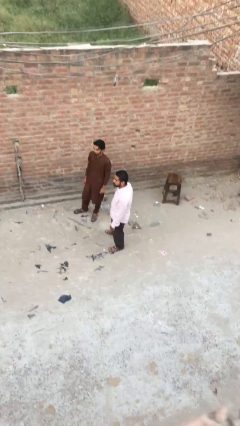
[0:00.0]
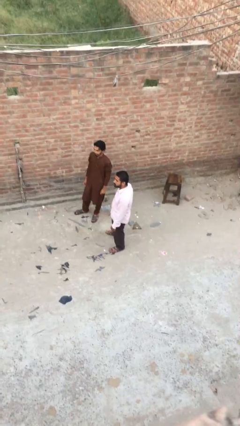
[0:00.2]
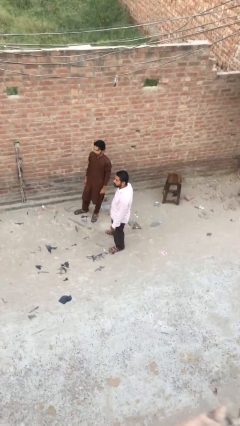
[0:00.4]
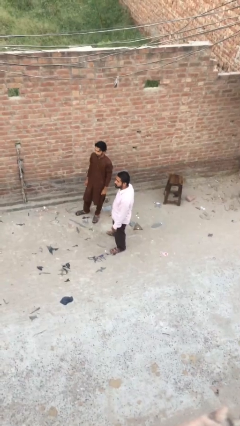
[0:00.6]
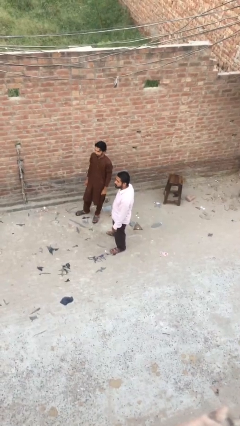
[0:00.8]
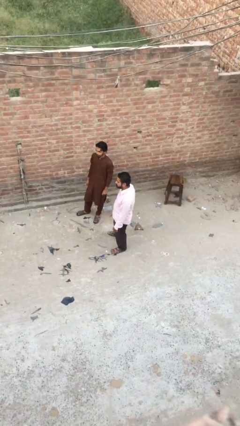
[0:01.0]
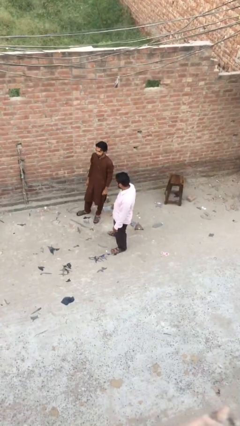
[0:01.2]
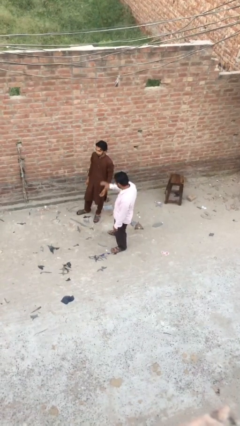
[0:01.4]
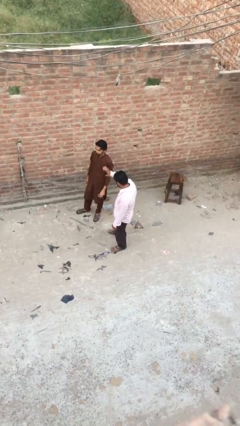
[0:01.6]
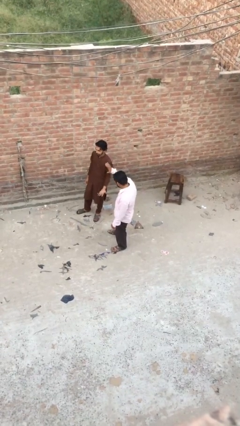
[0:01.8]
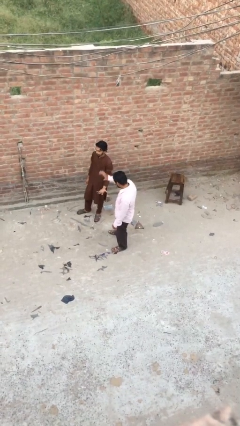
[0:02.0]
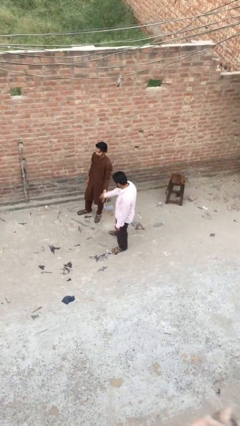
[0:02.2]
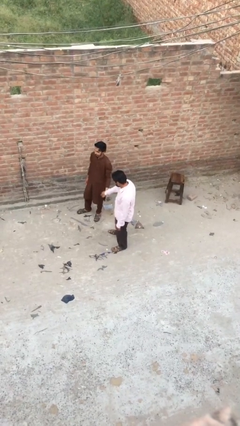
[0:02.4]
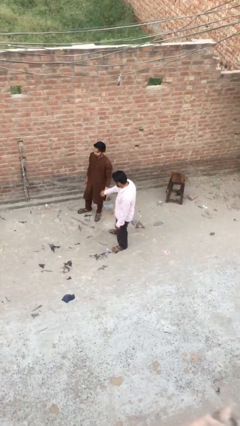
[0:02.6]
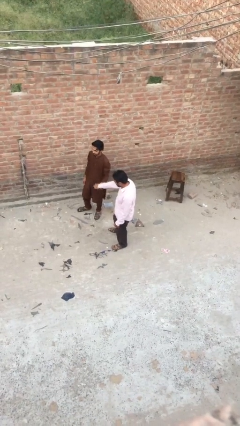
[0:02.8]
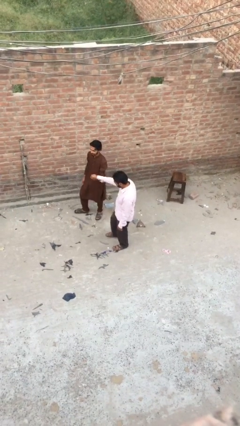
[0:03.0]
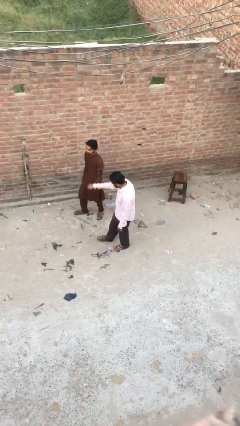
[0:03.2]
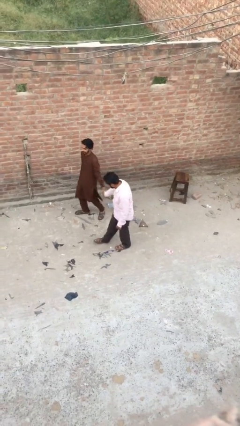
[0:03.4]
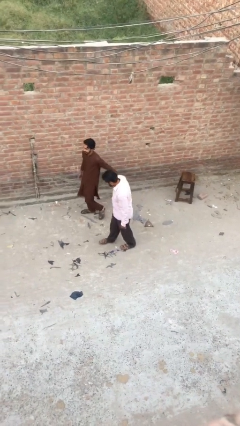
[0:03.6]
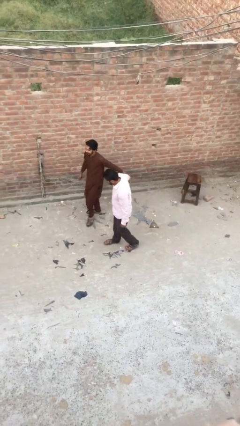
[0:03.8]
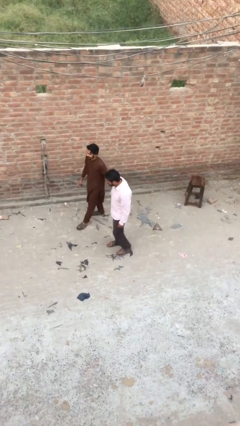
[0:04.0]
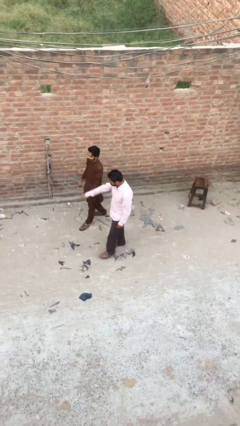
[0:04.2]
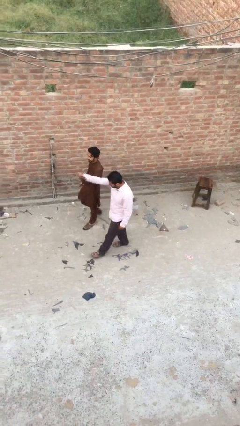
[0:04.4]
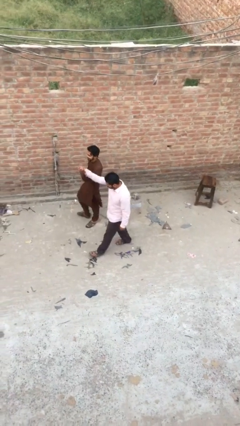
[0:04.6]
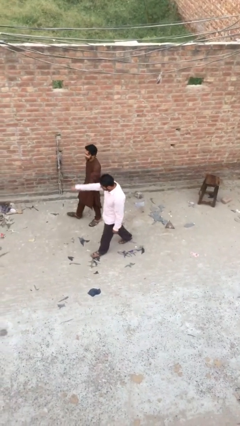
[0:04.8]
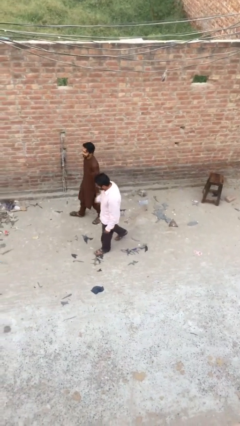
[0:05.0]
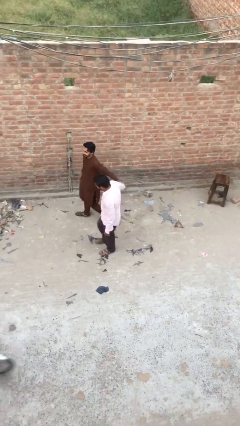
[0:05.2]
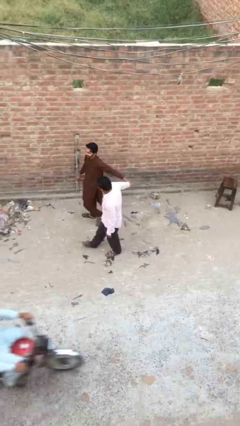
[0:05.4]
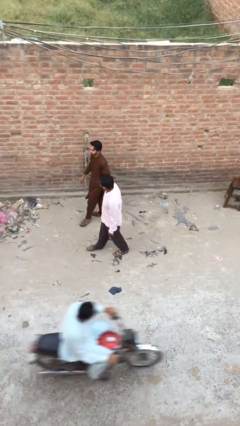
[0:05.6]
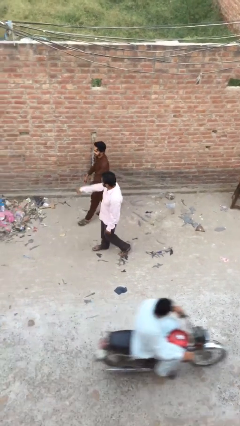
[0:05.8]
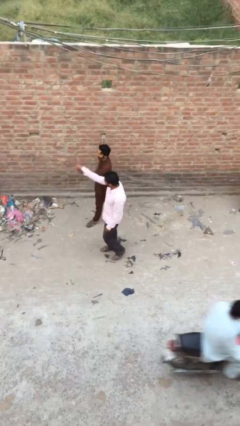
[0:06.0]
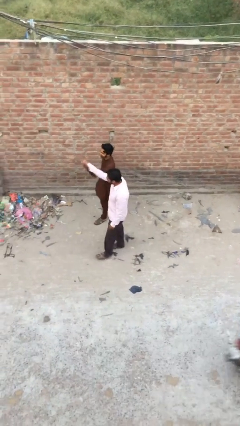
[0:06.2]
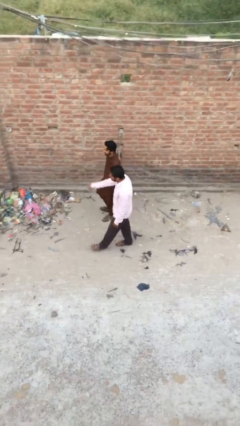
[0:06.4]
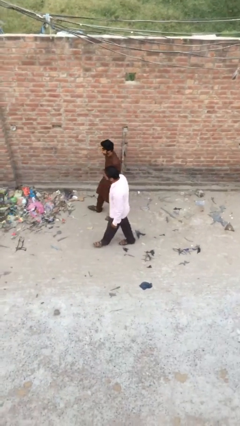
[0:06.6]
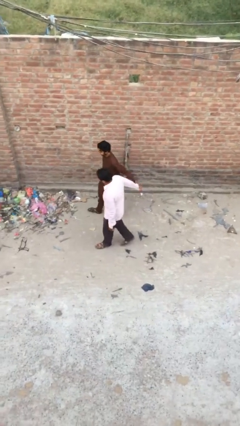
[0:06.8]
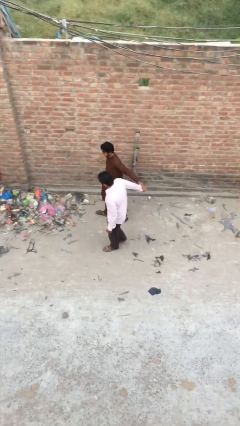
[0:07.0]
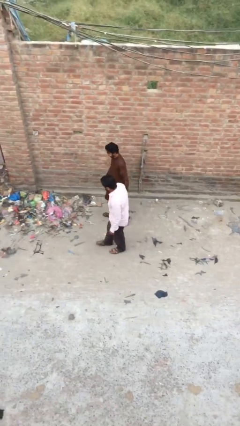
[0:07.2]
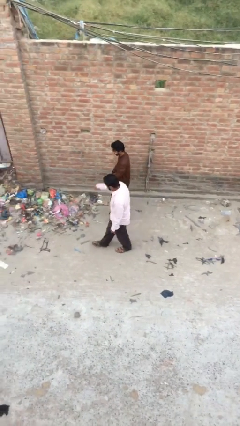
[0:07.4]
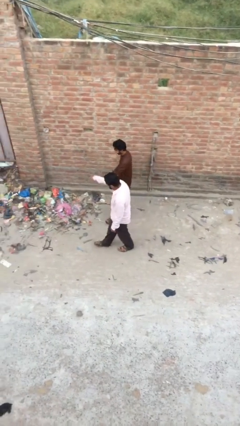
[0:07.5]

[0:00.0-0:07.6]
person holds hand

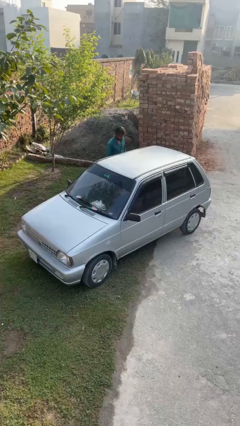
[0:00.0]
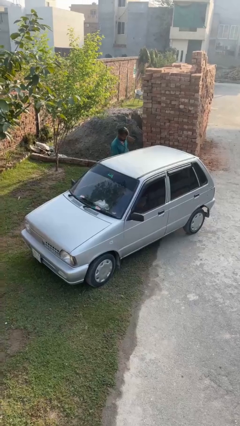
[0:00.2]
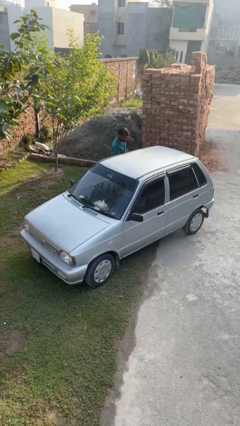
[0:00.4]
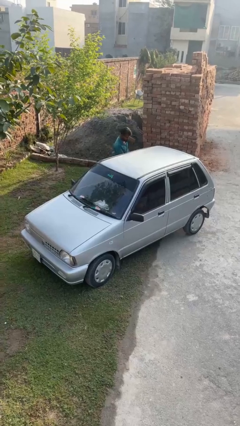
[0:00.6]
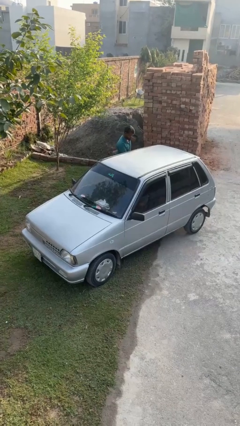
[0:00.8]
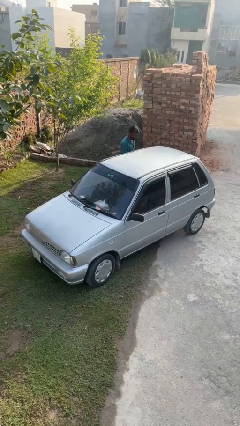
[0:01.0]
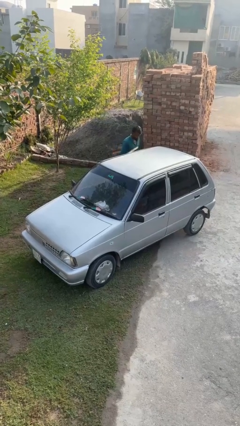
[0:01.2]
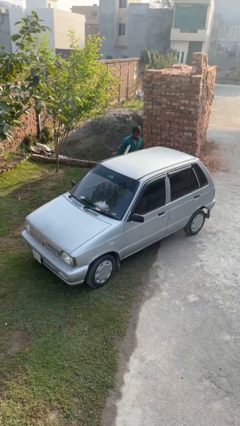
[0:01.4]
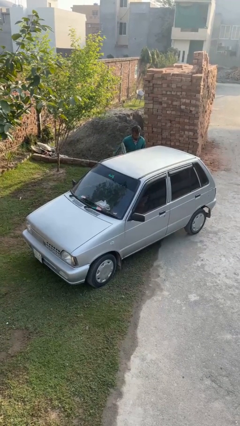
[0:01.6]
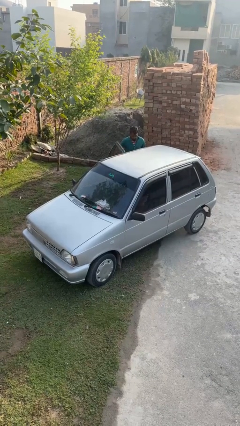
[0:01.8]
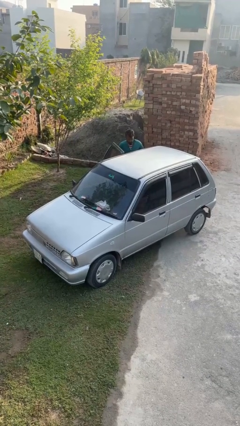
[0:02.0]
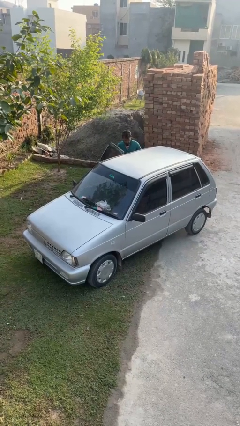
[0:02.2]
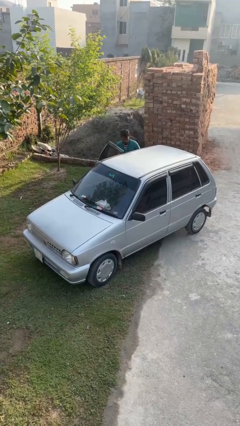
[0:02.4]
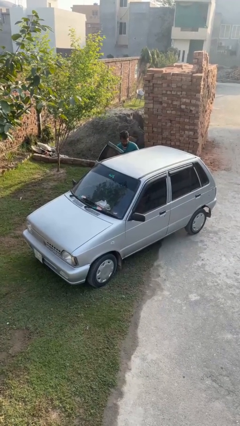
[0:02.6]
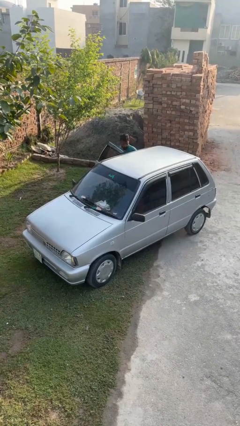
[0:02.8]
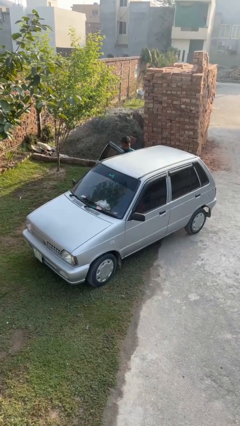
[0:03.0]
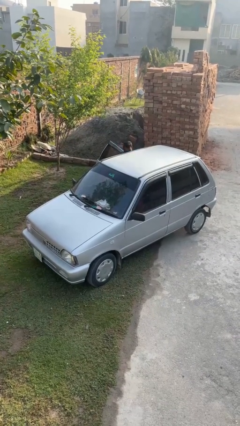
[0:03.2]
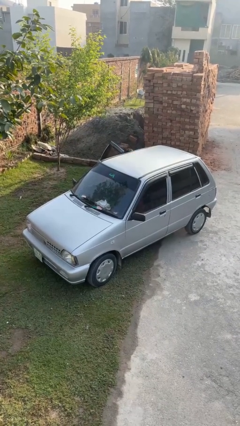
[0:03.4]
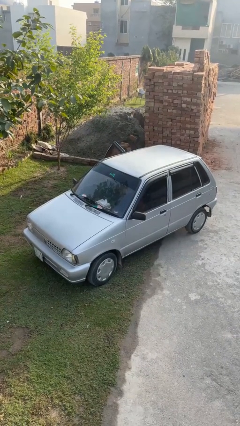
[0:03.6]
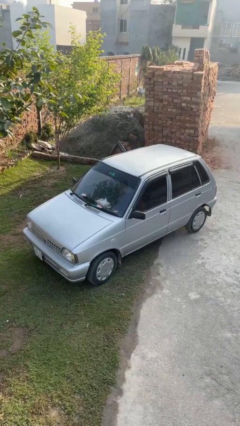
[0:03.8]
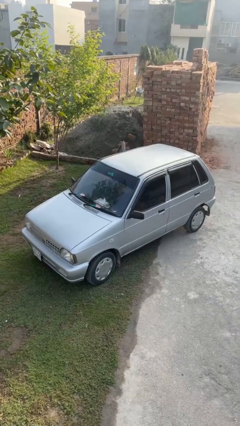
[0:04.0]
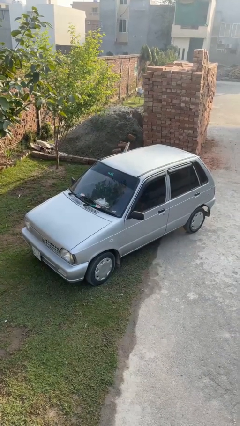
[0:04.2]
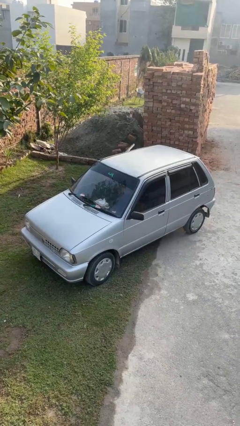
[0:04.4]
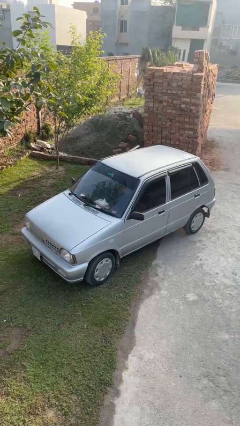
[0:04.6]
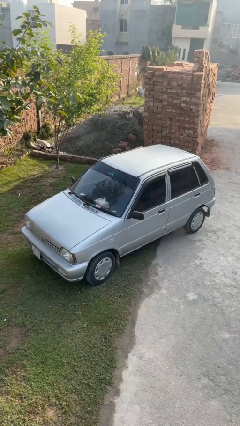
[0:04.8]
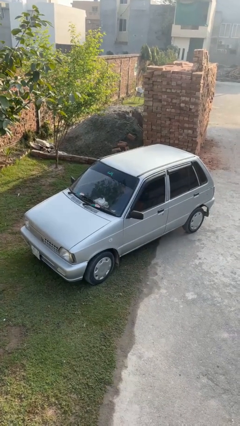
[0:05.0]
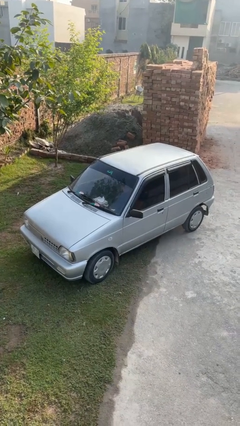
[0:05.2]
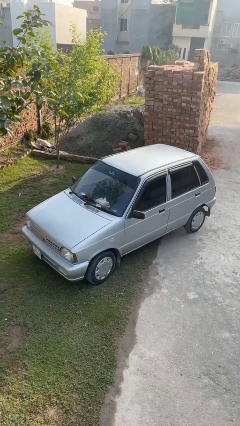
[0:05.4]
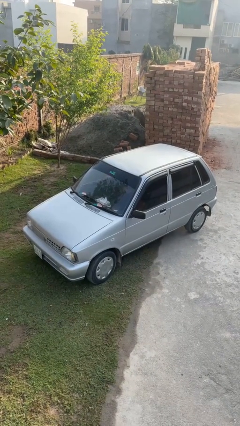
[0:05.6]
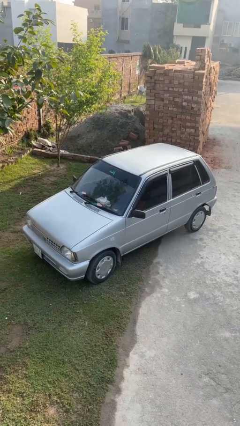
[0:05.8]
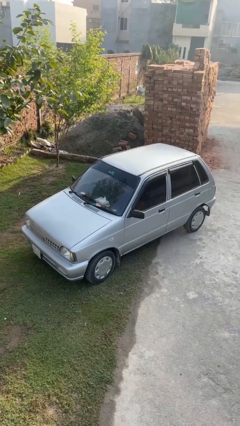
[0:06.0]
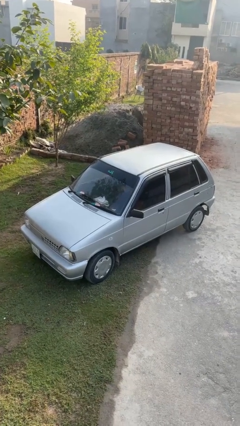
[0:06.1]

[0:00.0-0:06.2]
car picks up person

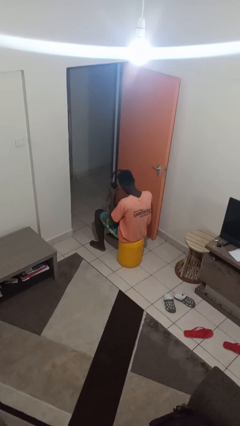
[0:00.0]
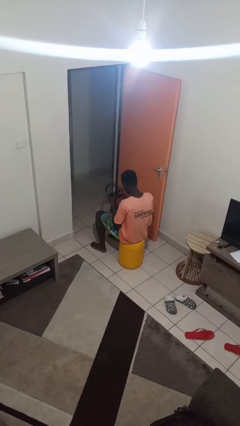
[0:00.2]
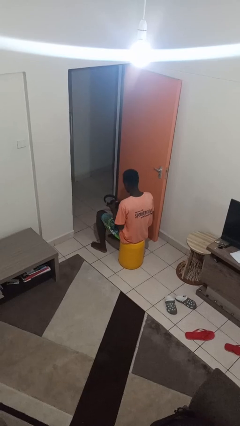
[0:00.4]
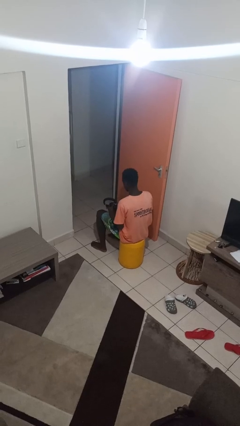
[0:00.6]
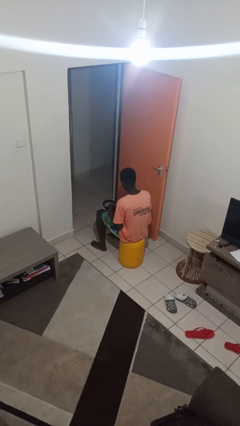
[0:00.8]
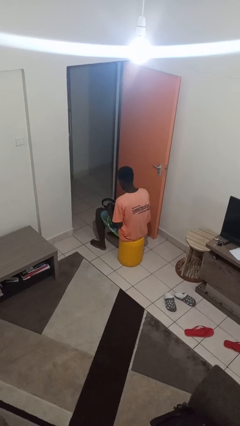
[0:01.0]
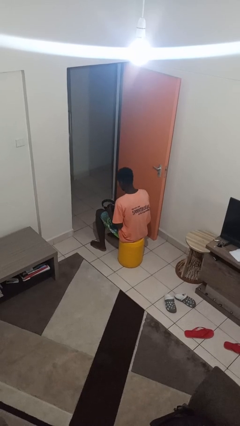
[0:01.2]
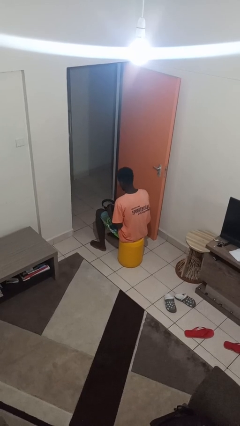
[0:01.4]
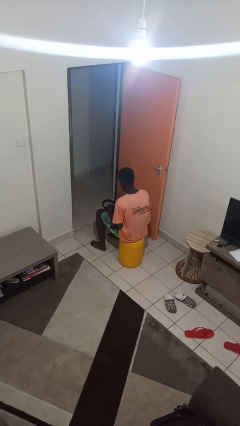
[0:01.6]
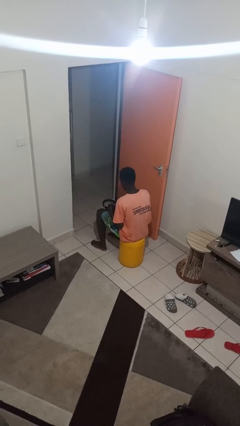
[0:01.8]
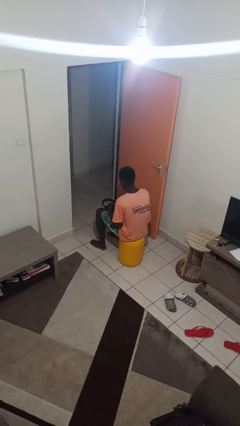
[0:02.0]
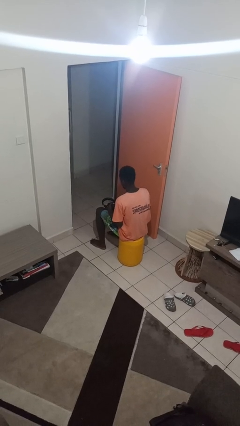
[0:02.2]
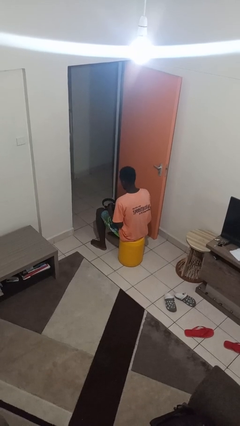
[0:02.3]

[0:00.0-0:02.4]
person takes off headphones

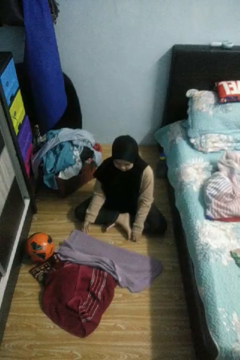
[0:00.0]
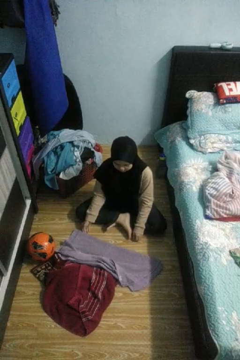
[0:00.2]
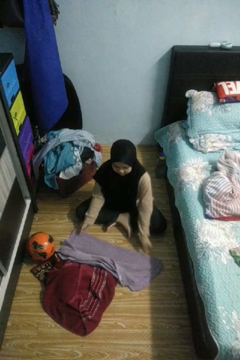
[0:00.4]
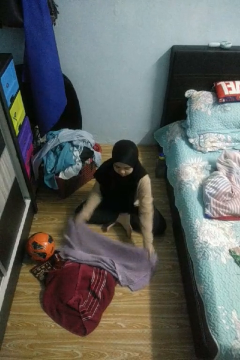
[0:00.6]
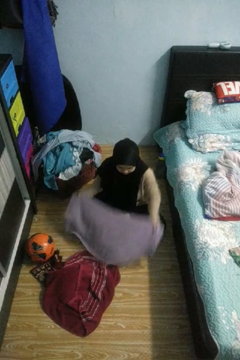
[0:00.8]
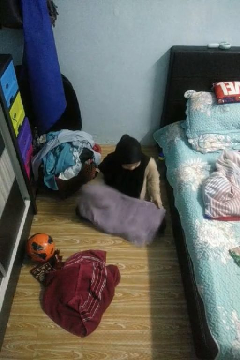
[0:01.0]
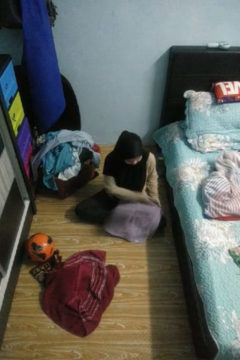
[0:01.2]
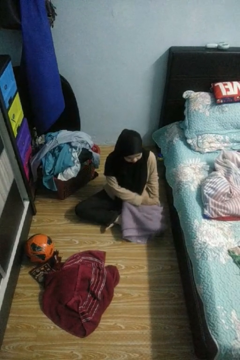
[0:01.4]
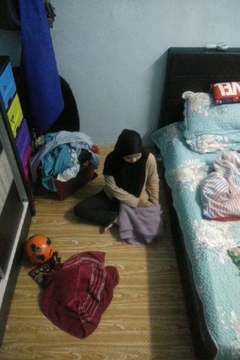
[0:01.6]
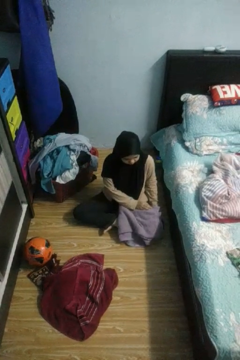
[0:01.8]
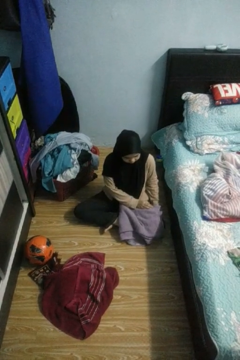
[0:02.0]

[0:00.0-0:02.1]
person folds towel
